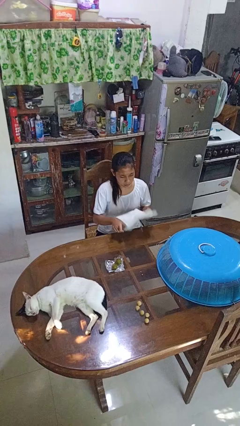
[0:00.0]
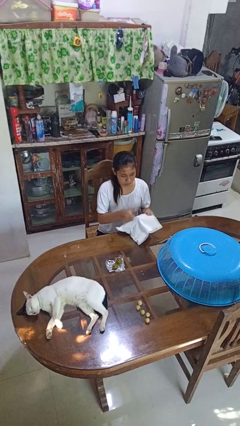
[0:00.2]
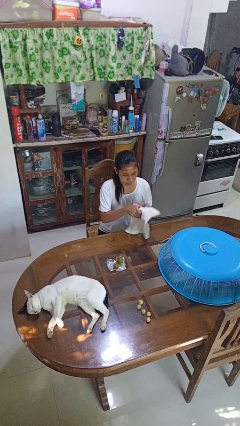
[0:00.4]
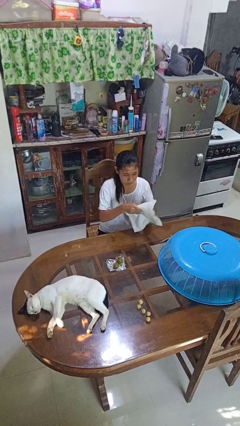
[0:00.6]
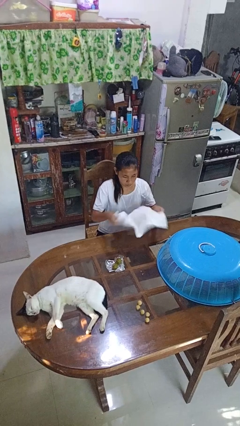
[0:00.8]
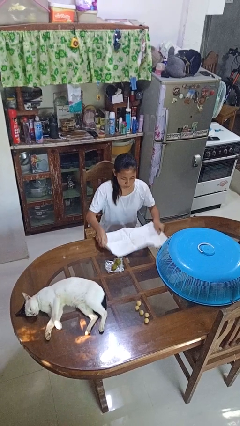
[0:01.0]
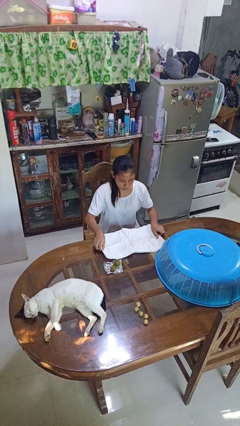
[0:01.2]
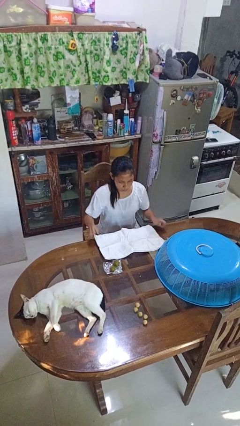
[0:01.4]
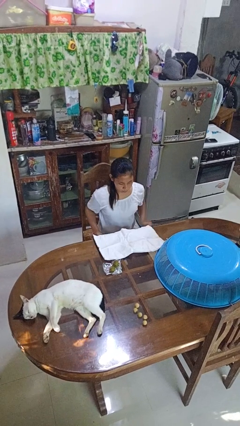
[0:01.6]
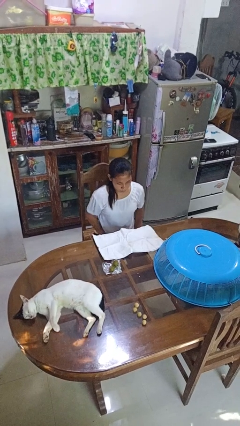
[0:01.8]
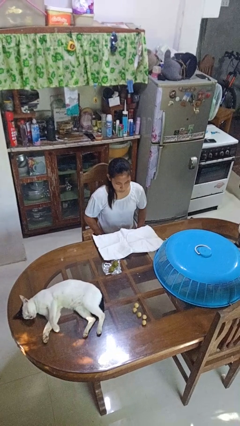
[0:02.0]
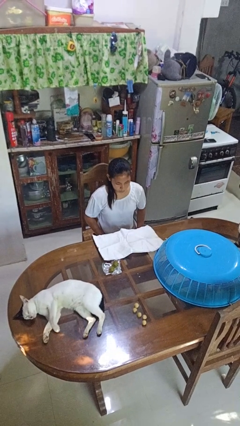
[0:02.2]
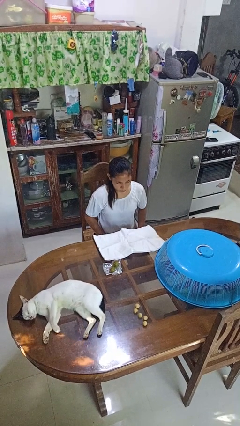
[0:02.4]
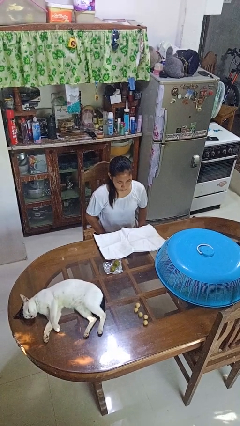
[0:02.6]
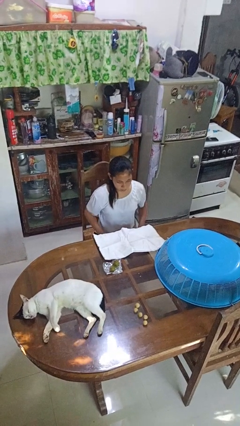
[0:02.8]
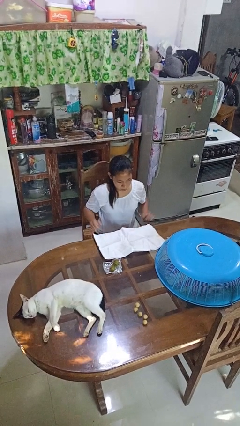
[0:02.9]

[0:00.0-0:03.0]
person spreads tablecloth

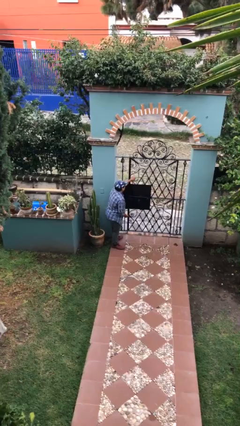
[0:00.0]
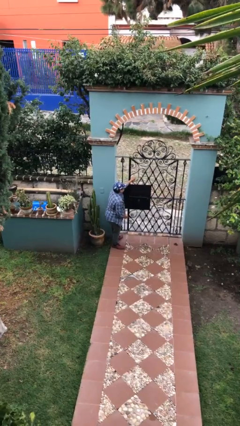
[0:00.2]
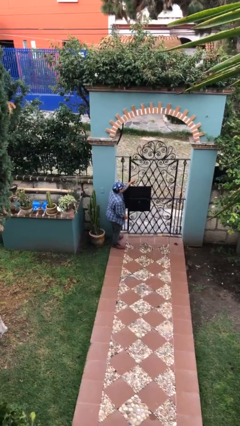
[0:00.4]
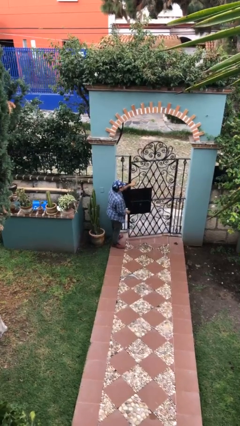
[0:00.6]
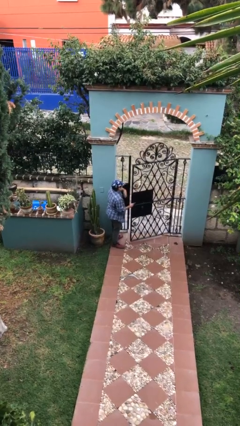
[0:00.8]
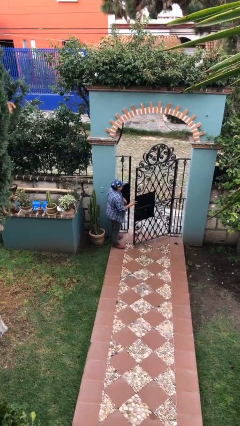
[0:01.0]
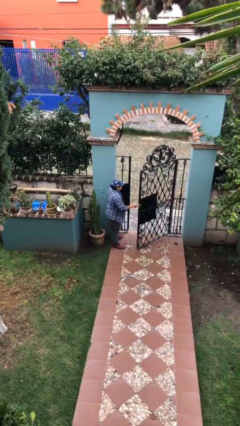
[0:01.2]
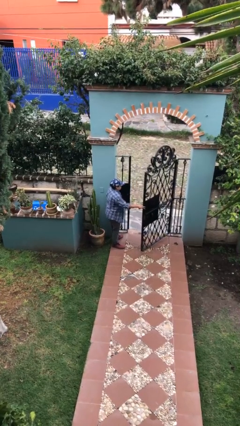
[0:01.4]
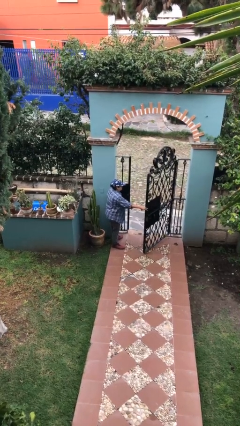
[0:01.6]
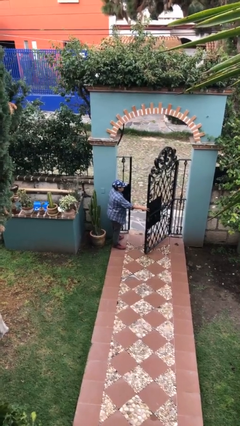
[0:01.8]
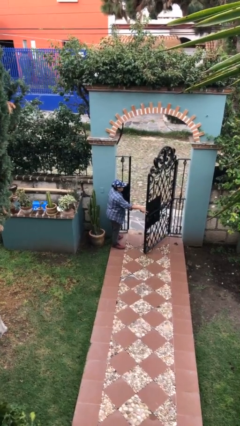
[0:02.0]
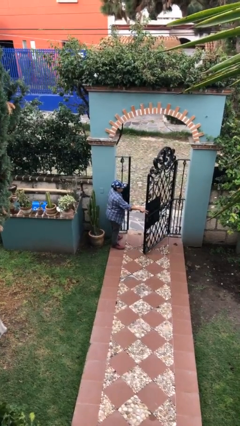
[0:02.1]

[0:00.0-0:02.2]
person opens facility door

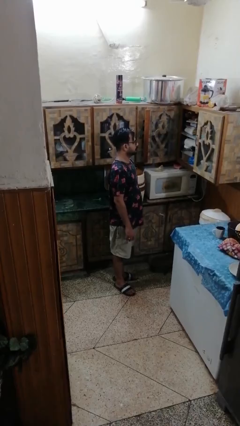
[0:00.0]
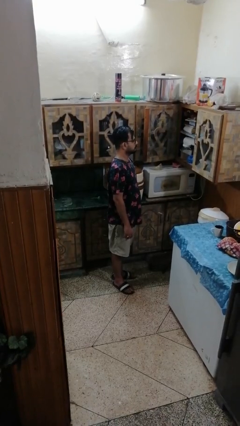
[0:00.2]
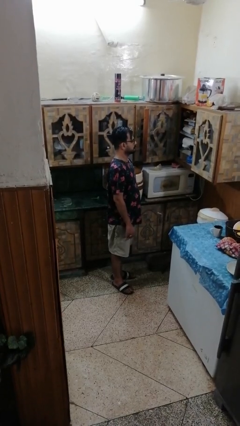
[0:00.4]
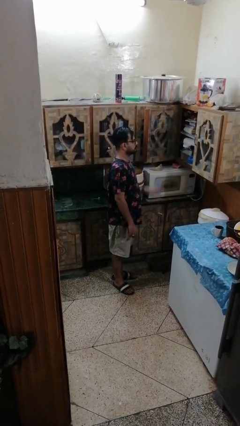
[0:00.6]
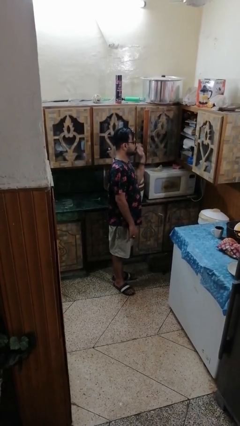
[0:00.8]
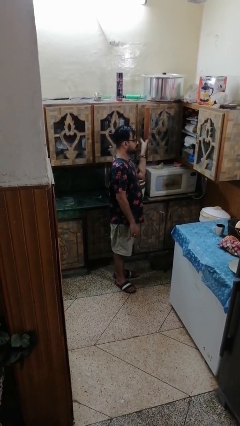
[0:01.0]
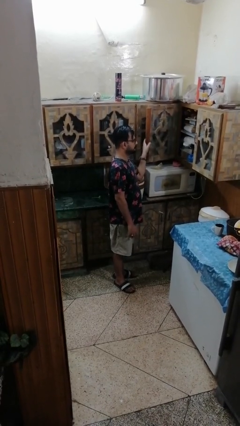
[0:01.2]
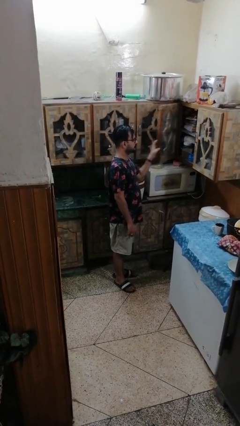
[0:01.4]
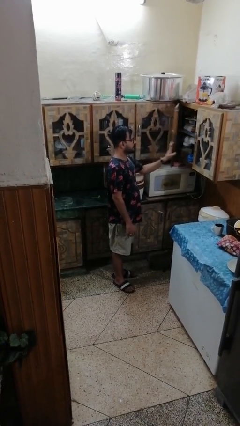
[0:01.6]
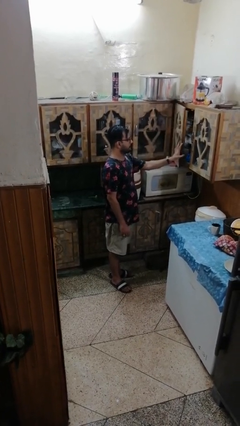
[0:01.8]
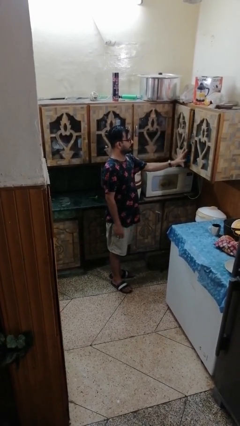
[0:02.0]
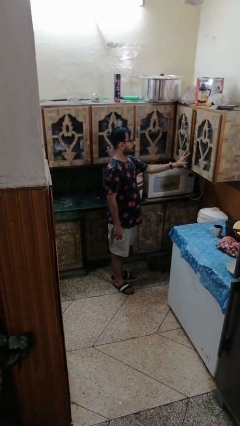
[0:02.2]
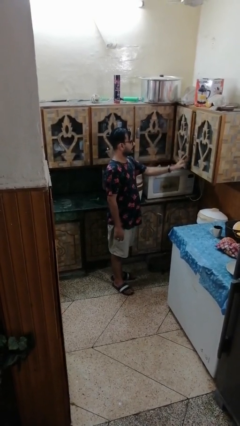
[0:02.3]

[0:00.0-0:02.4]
person closes cabinet

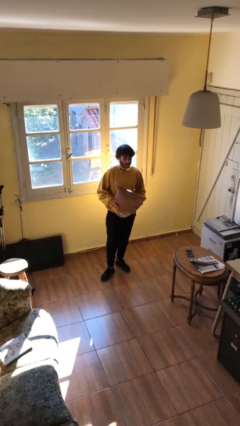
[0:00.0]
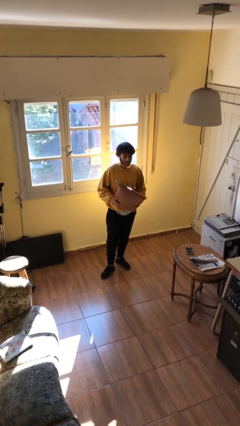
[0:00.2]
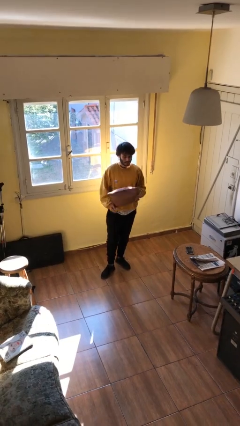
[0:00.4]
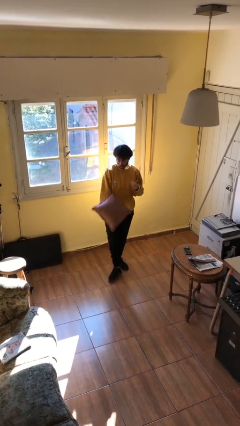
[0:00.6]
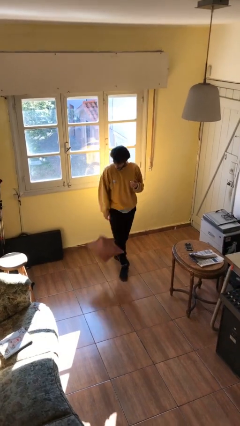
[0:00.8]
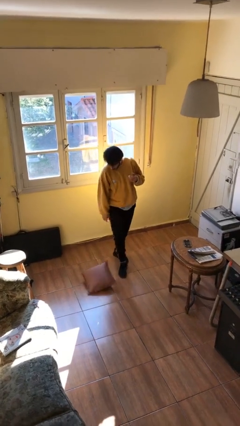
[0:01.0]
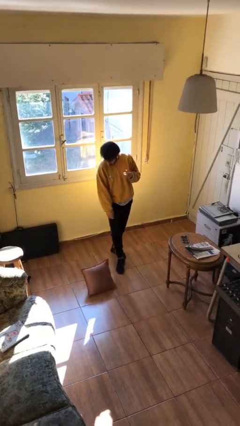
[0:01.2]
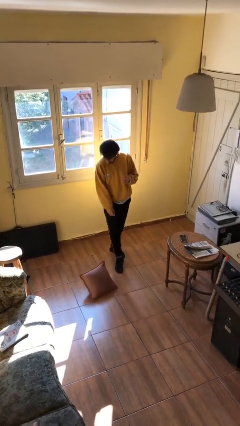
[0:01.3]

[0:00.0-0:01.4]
person drops object

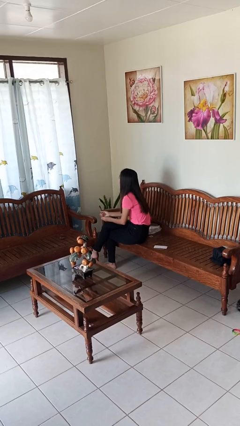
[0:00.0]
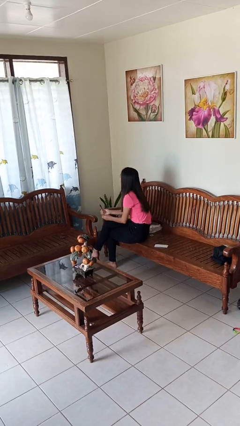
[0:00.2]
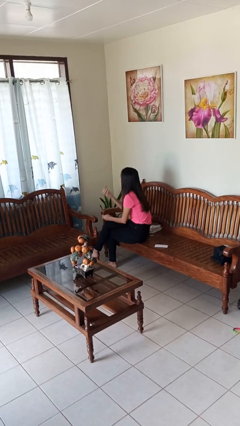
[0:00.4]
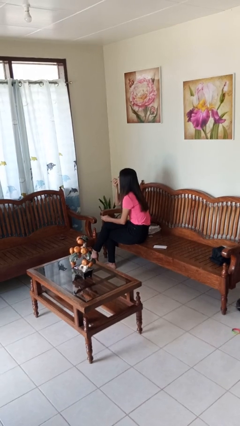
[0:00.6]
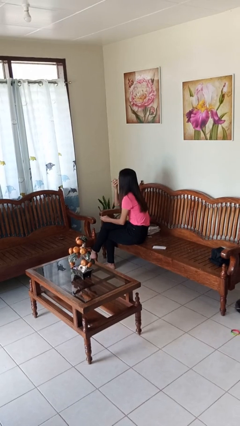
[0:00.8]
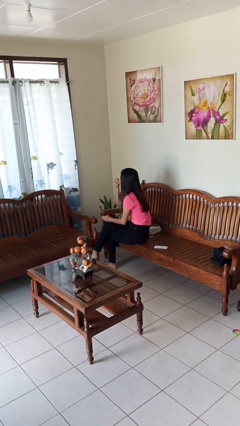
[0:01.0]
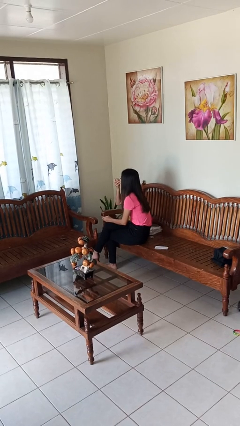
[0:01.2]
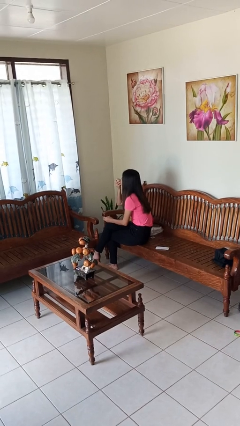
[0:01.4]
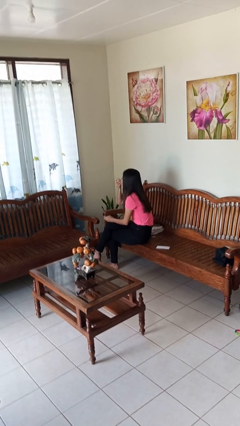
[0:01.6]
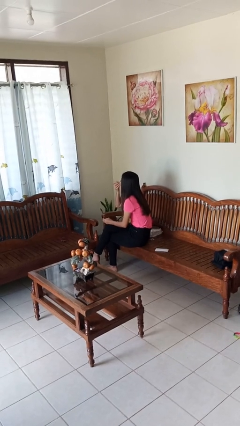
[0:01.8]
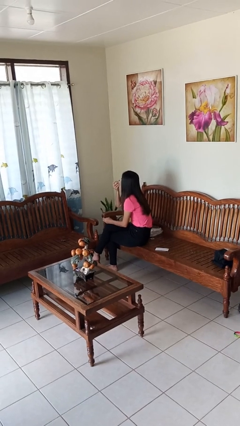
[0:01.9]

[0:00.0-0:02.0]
person applies eye makeup

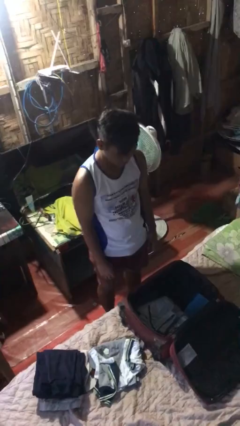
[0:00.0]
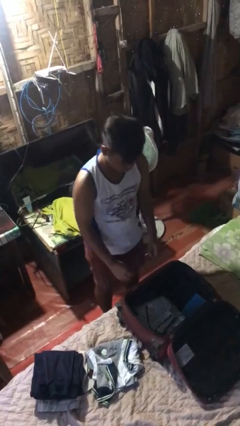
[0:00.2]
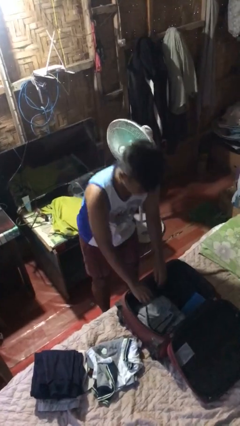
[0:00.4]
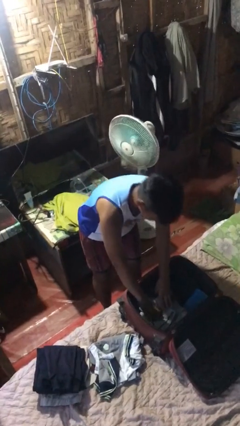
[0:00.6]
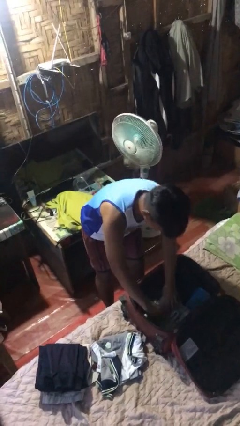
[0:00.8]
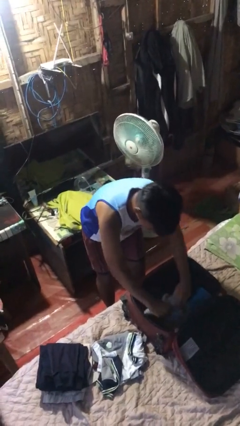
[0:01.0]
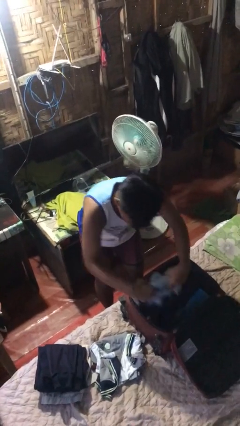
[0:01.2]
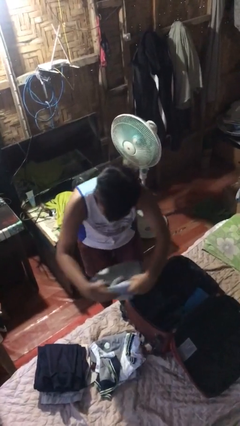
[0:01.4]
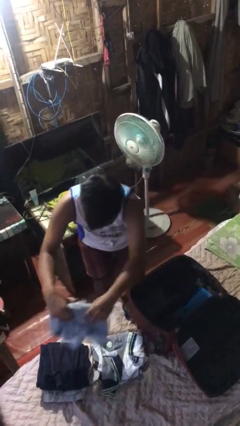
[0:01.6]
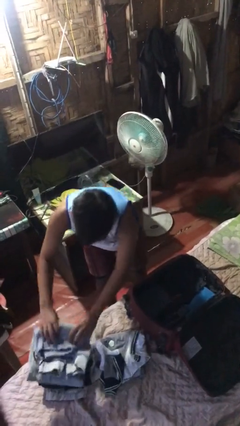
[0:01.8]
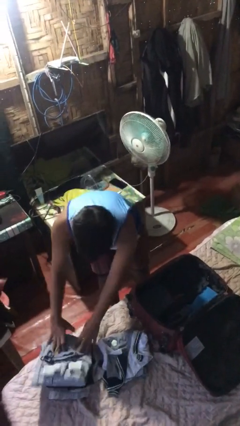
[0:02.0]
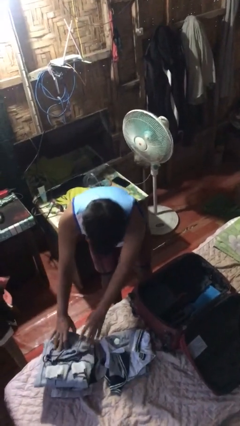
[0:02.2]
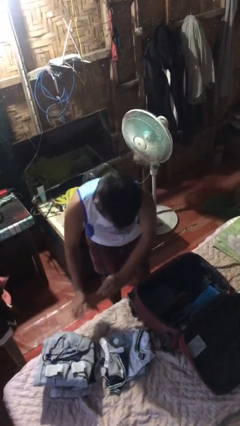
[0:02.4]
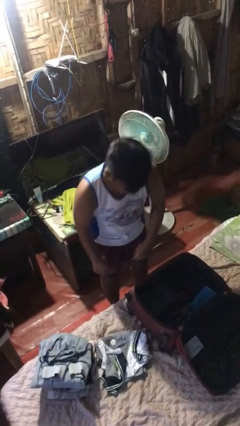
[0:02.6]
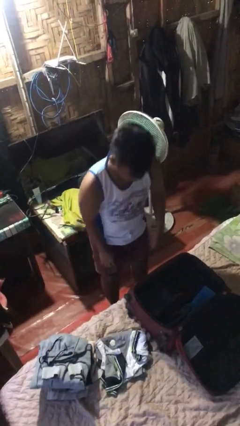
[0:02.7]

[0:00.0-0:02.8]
person unloads clothes from suitcase

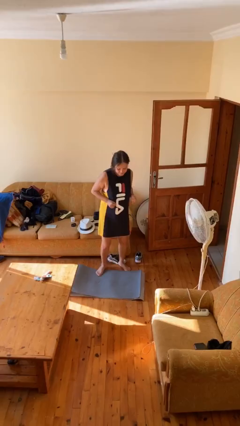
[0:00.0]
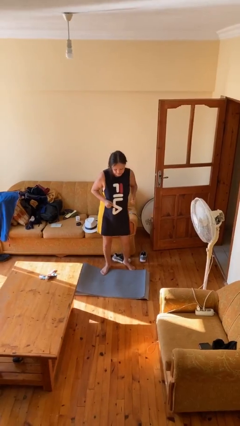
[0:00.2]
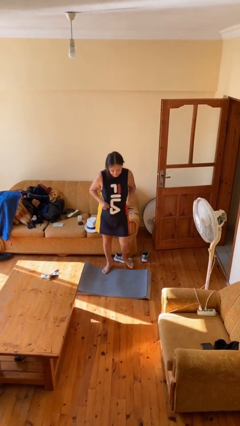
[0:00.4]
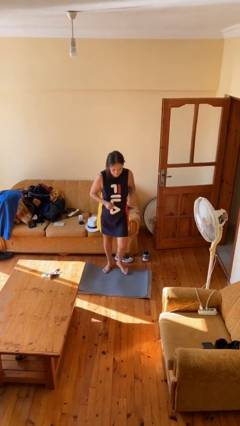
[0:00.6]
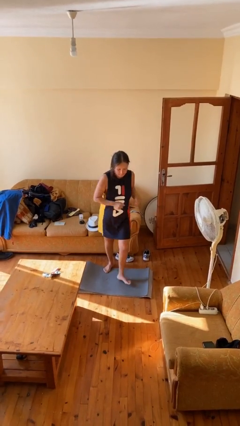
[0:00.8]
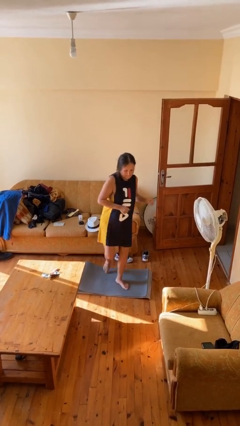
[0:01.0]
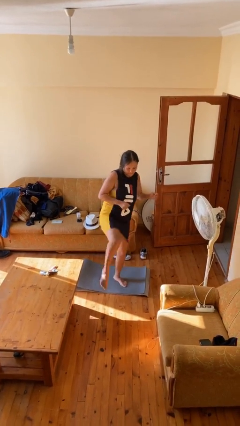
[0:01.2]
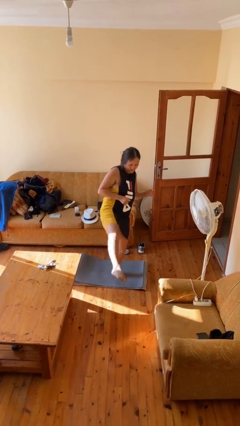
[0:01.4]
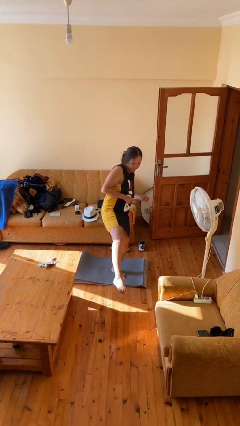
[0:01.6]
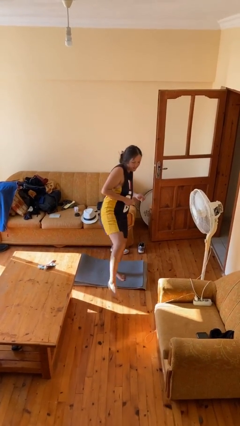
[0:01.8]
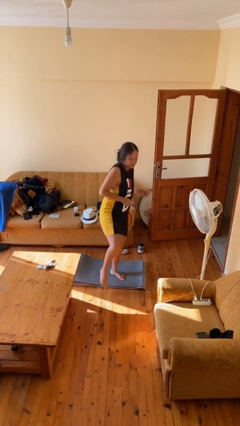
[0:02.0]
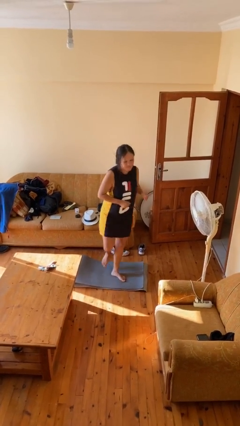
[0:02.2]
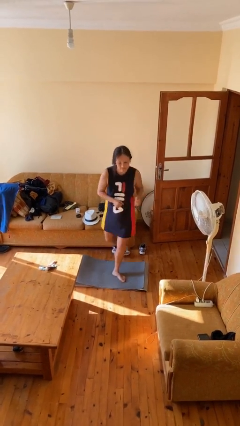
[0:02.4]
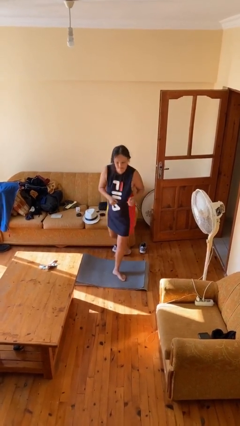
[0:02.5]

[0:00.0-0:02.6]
person karate kicks

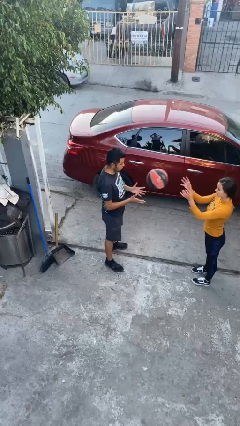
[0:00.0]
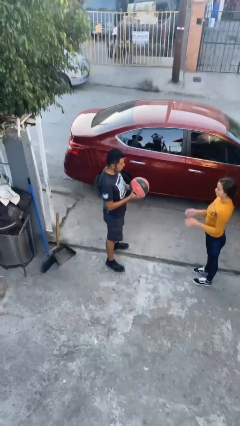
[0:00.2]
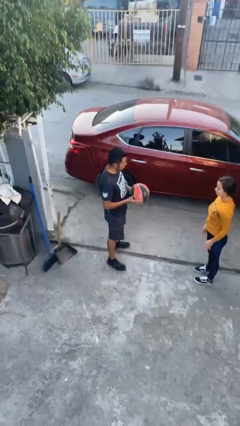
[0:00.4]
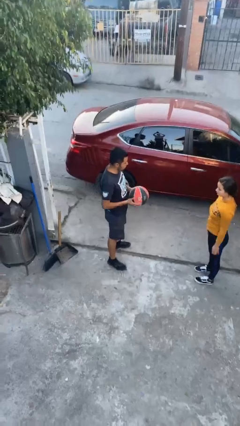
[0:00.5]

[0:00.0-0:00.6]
person catches object from person
